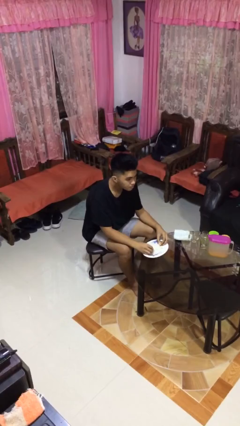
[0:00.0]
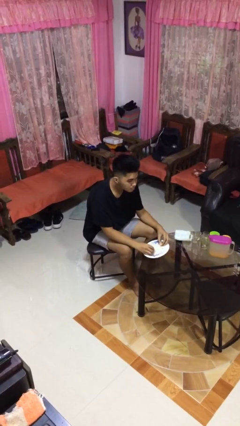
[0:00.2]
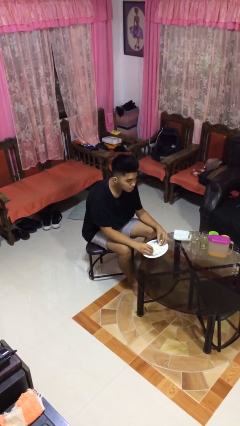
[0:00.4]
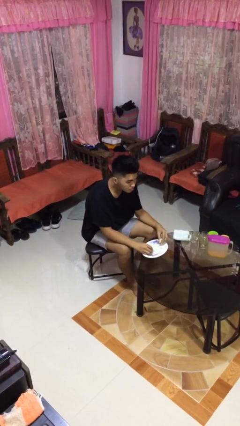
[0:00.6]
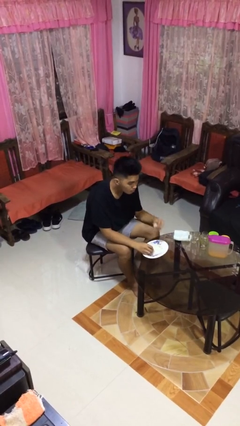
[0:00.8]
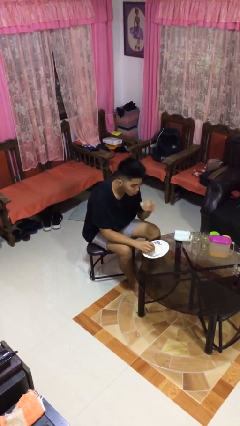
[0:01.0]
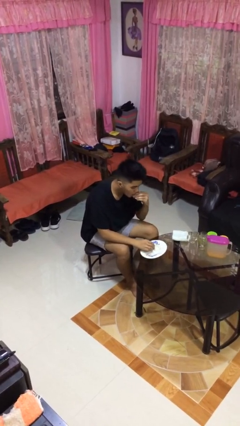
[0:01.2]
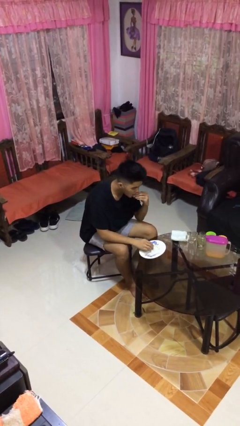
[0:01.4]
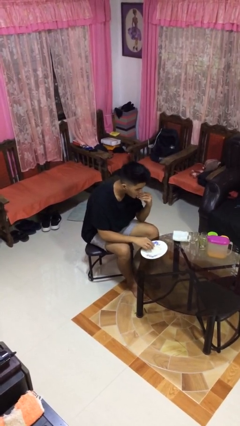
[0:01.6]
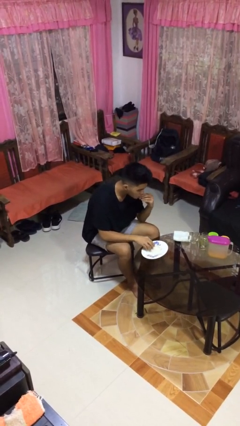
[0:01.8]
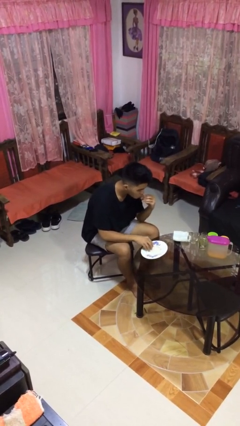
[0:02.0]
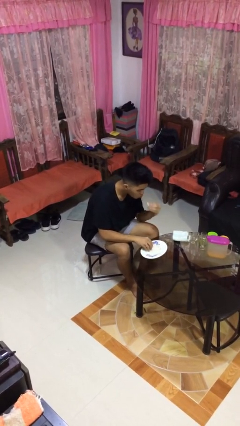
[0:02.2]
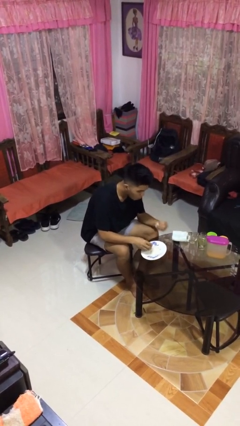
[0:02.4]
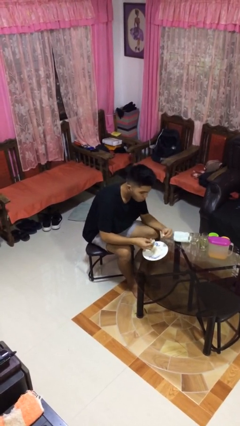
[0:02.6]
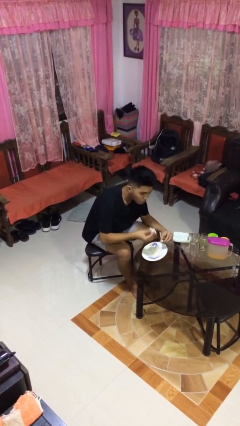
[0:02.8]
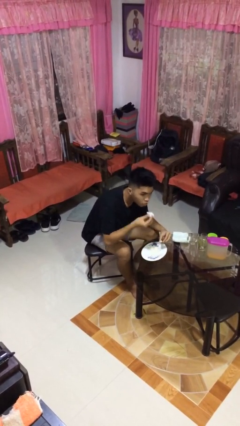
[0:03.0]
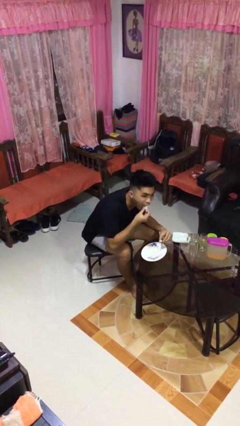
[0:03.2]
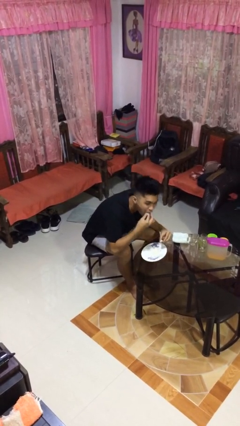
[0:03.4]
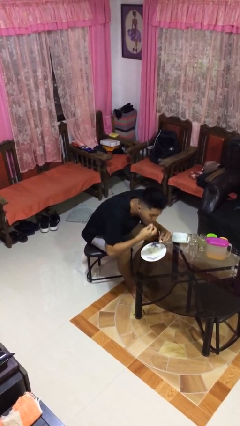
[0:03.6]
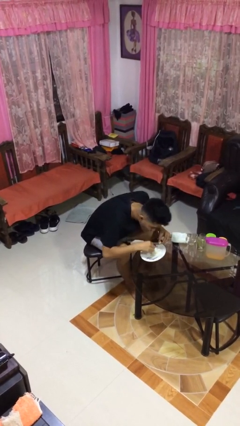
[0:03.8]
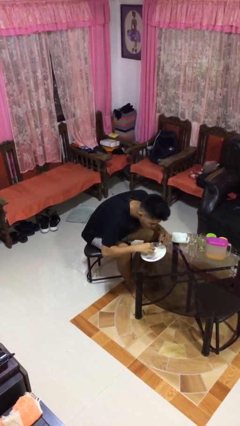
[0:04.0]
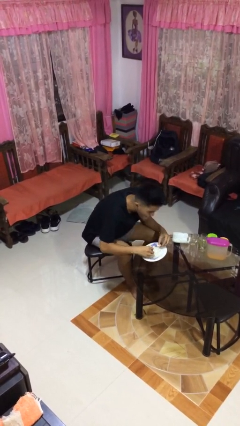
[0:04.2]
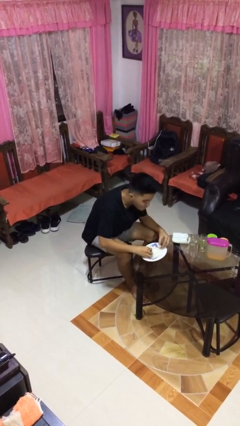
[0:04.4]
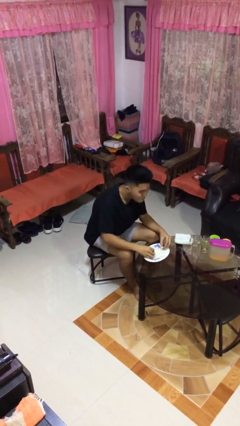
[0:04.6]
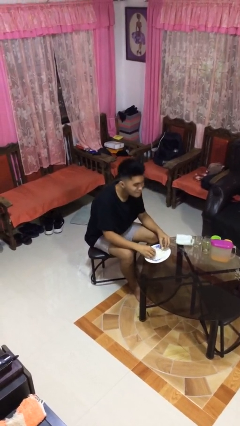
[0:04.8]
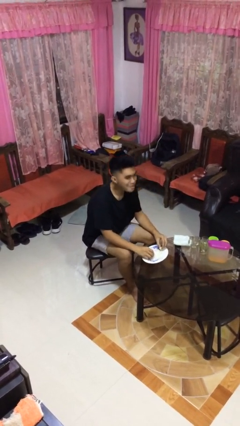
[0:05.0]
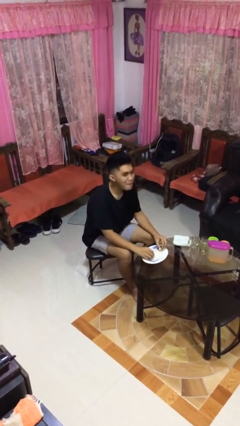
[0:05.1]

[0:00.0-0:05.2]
person eats with hands

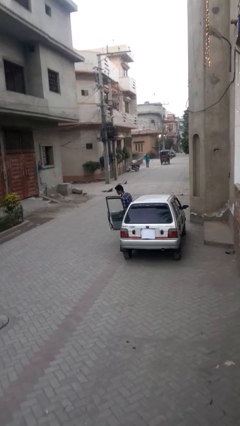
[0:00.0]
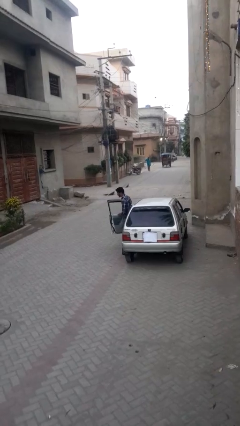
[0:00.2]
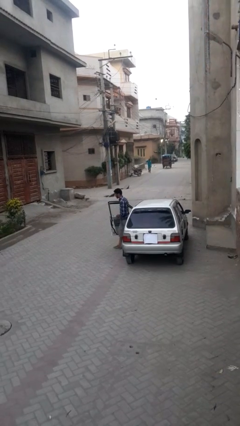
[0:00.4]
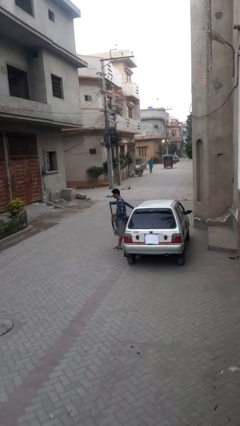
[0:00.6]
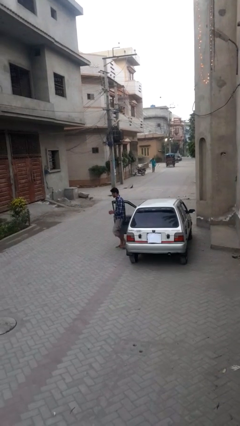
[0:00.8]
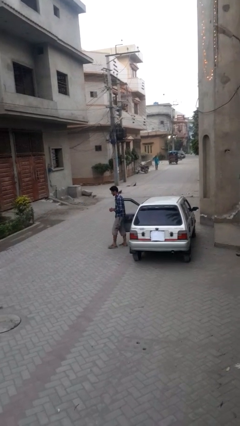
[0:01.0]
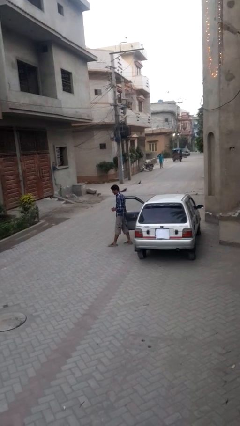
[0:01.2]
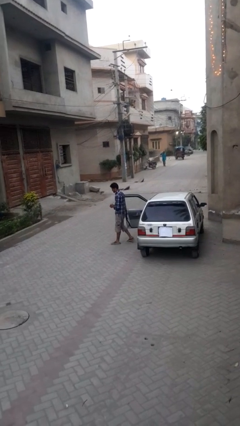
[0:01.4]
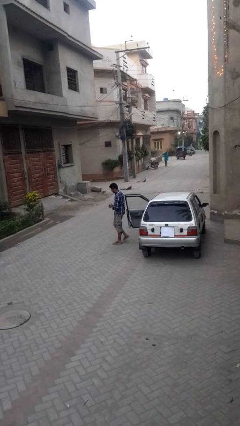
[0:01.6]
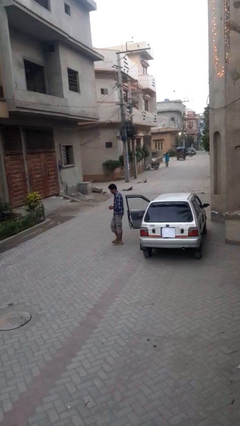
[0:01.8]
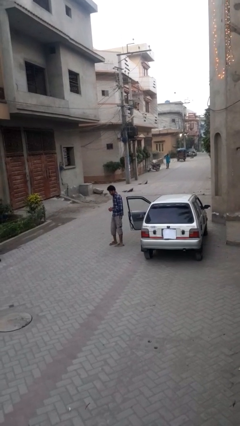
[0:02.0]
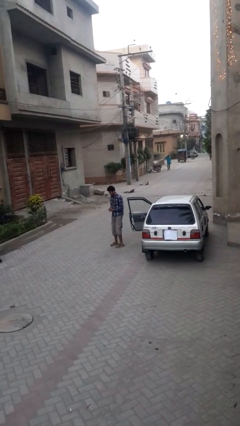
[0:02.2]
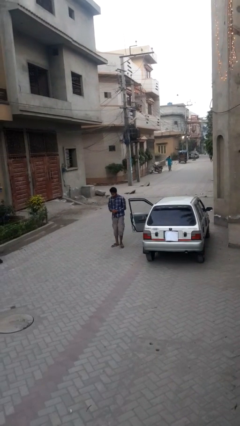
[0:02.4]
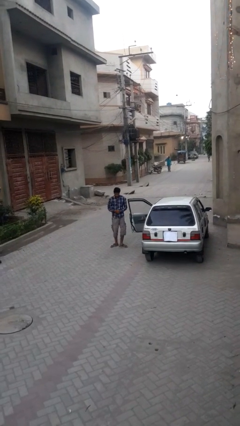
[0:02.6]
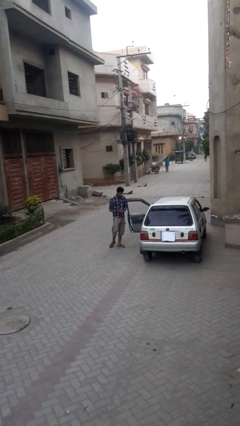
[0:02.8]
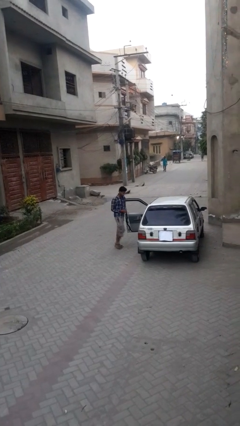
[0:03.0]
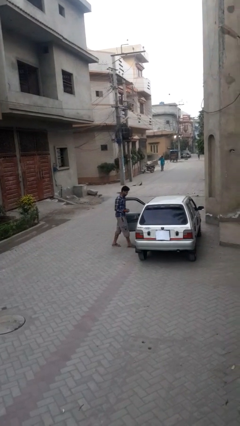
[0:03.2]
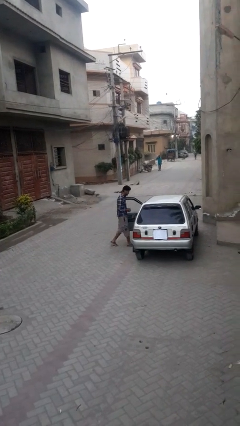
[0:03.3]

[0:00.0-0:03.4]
person exits car

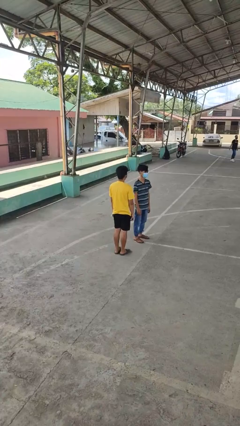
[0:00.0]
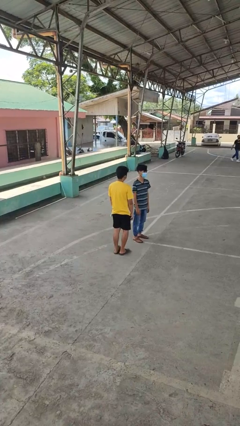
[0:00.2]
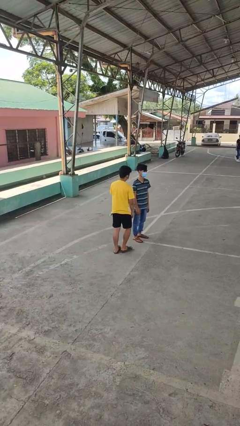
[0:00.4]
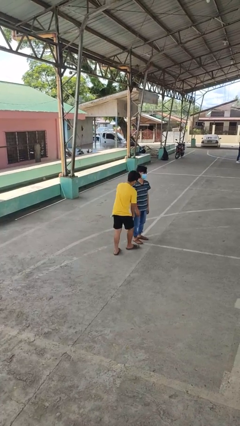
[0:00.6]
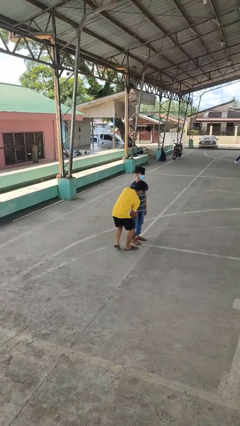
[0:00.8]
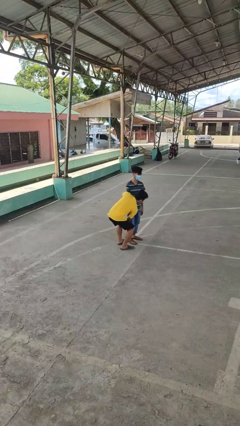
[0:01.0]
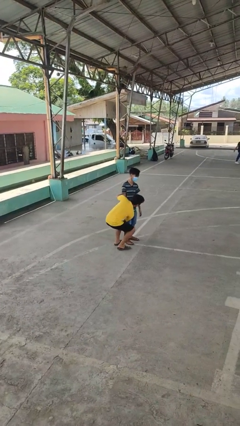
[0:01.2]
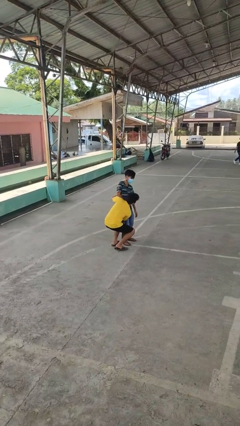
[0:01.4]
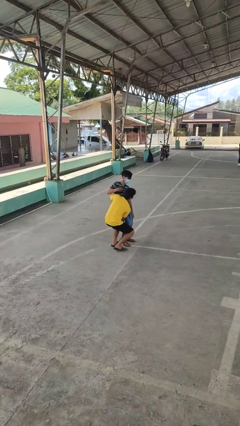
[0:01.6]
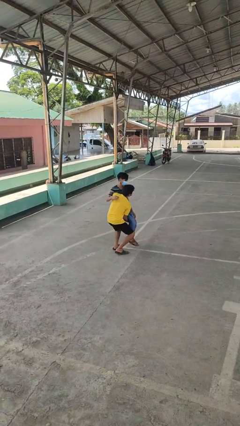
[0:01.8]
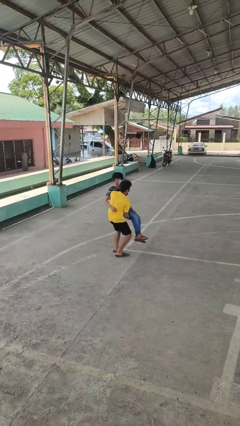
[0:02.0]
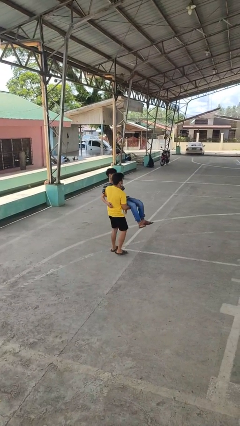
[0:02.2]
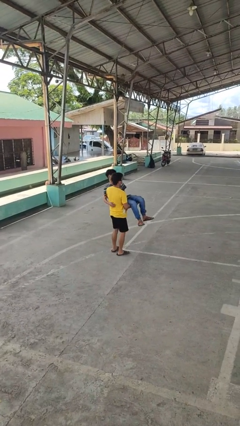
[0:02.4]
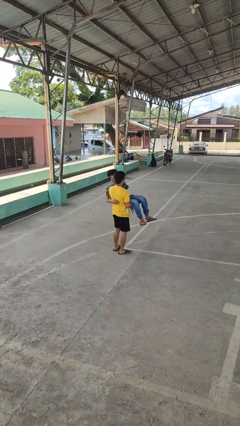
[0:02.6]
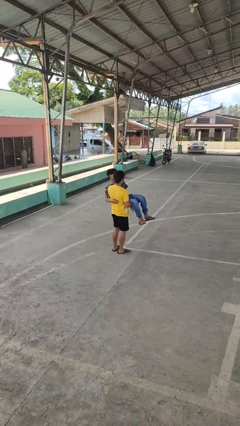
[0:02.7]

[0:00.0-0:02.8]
person picks up person

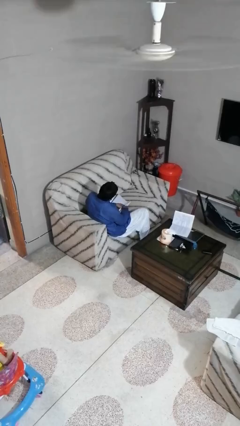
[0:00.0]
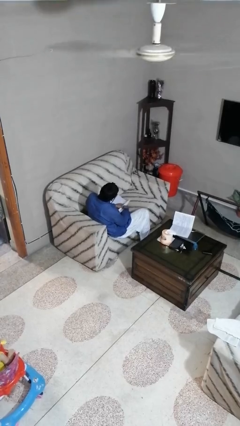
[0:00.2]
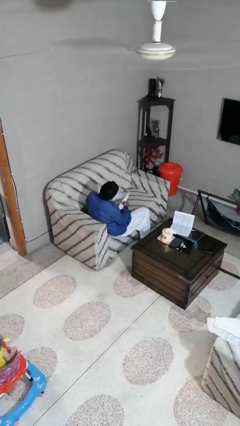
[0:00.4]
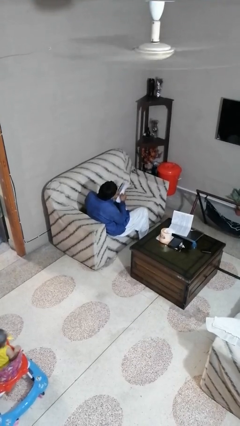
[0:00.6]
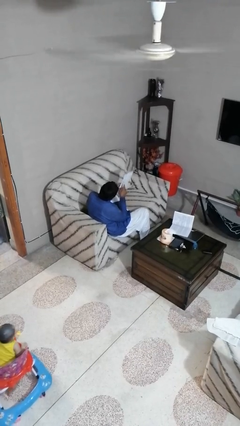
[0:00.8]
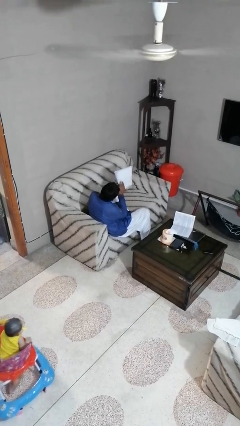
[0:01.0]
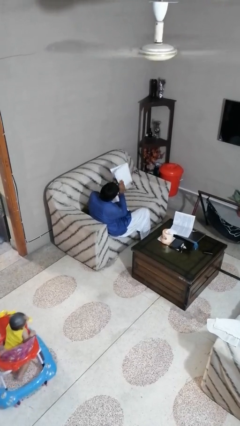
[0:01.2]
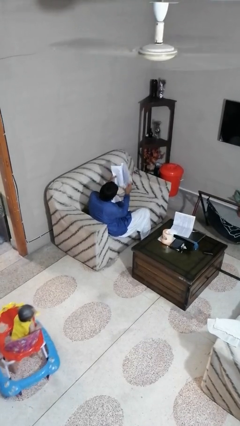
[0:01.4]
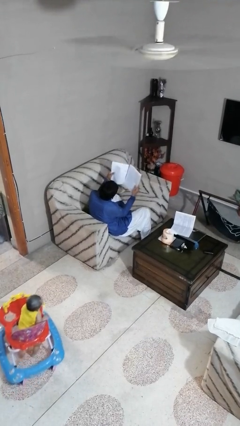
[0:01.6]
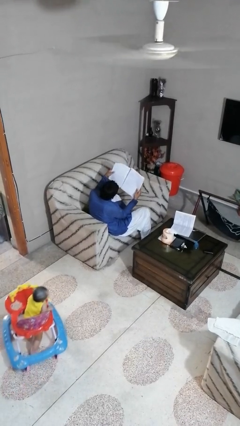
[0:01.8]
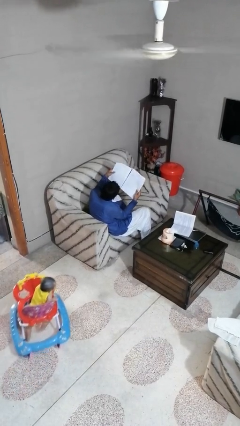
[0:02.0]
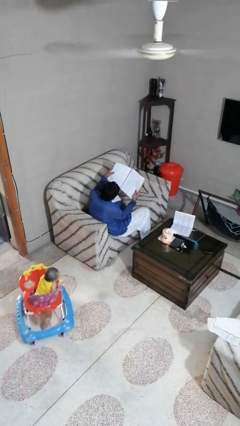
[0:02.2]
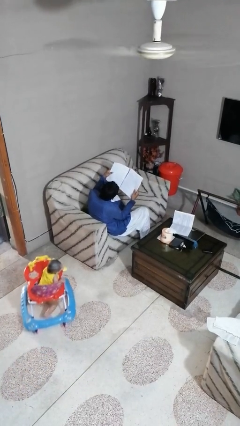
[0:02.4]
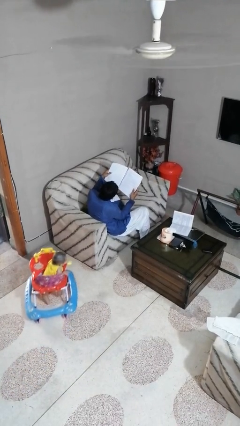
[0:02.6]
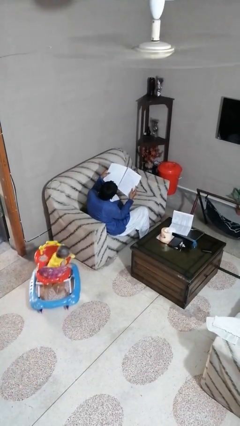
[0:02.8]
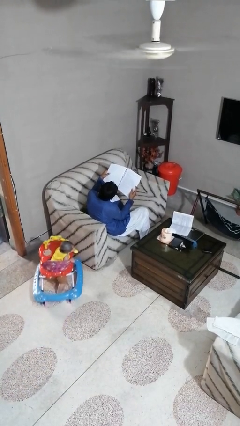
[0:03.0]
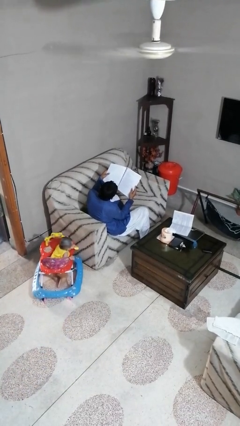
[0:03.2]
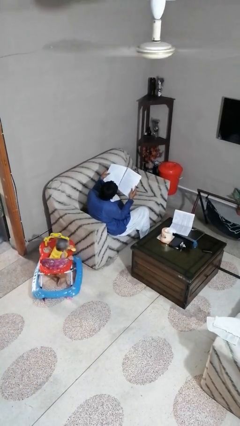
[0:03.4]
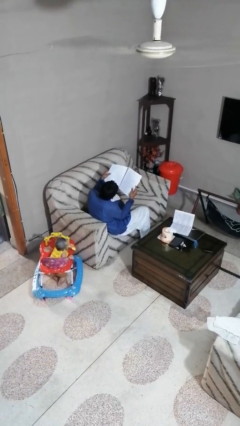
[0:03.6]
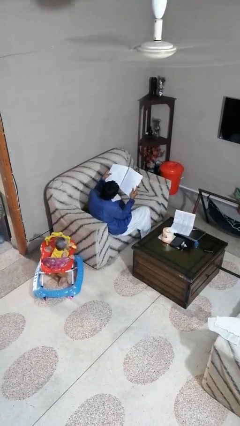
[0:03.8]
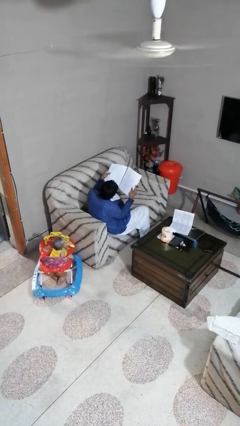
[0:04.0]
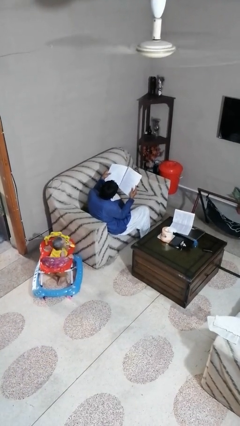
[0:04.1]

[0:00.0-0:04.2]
person reads magazine

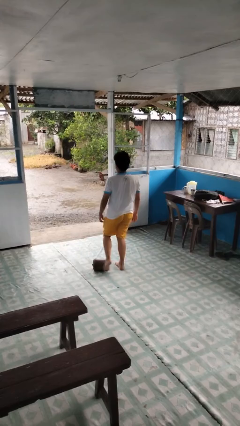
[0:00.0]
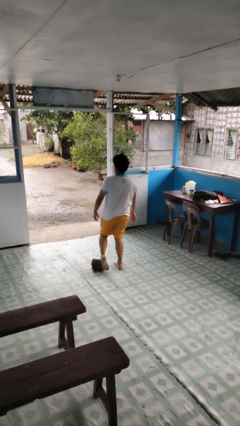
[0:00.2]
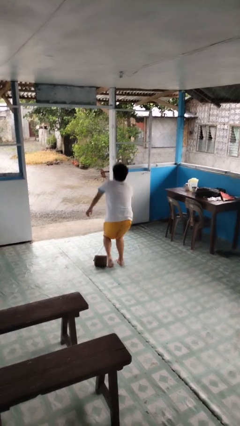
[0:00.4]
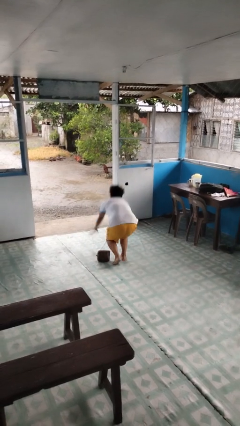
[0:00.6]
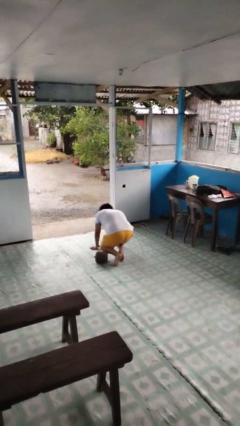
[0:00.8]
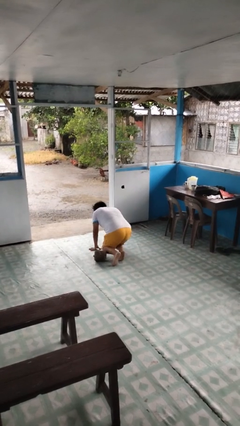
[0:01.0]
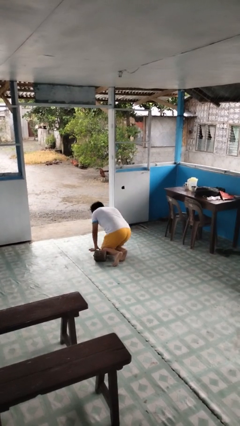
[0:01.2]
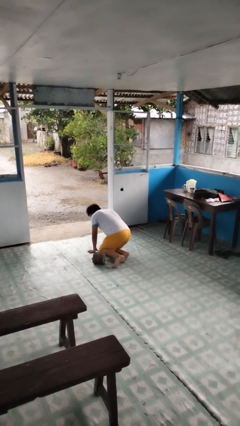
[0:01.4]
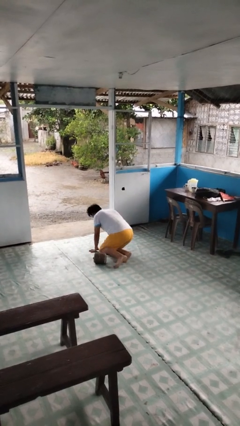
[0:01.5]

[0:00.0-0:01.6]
person trips on object on floor

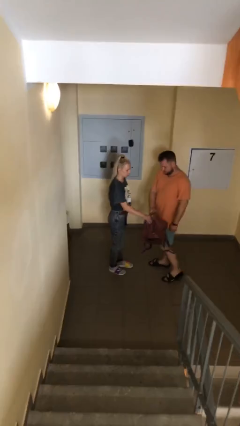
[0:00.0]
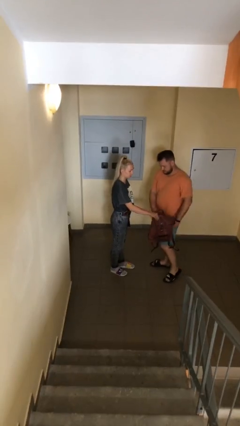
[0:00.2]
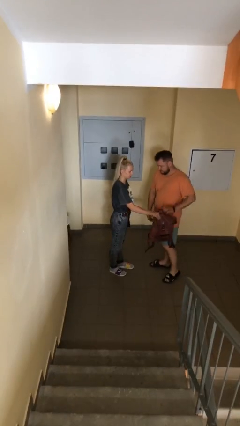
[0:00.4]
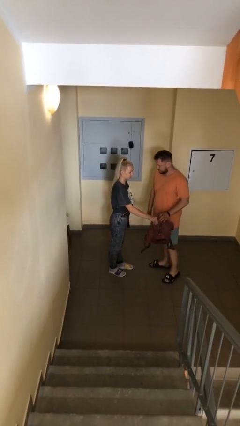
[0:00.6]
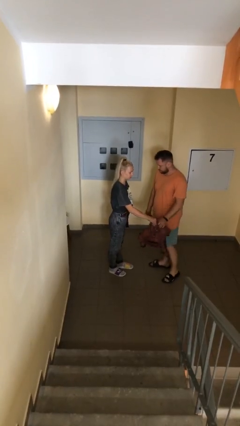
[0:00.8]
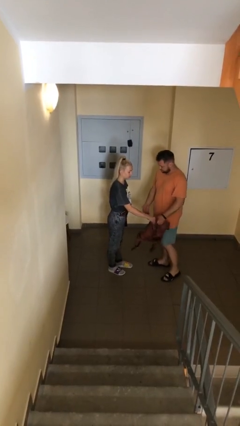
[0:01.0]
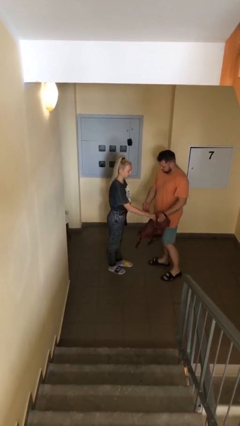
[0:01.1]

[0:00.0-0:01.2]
person transfers object to person
